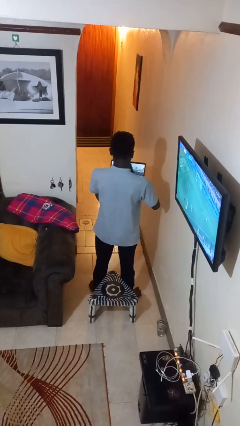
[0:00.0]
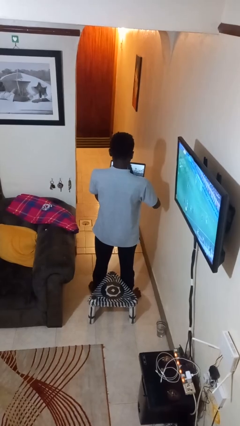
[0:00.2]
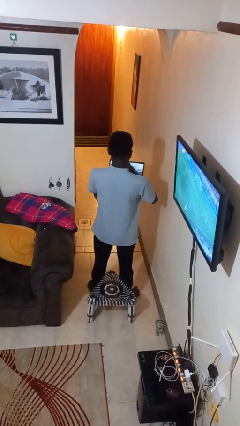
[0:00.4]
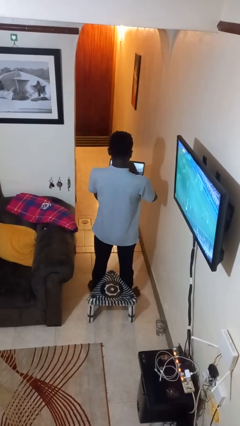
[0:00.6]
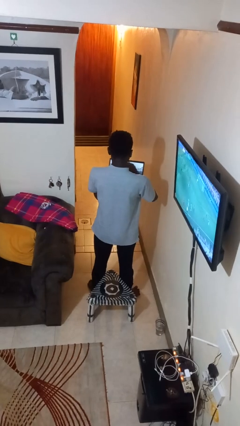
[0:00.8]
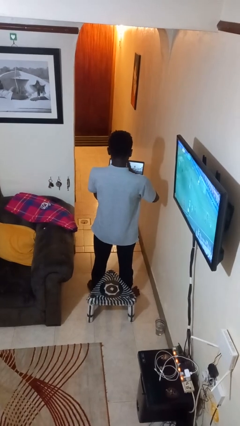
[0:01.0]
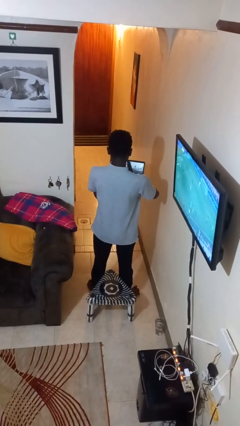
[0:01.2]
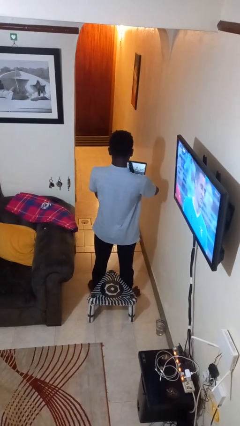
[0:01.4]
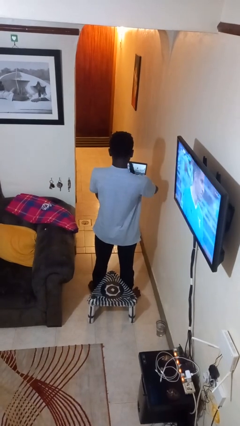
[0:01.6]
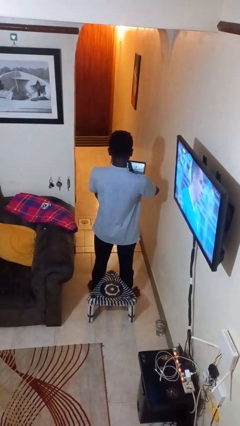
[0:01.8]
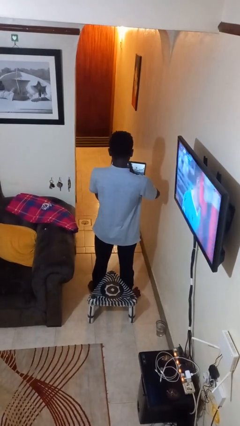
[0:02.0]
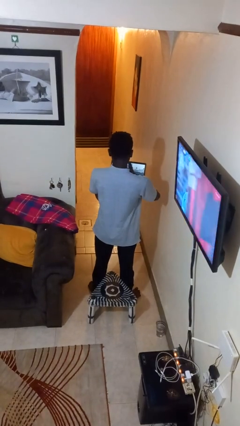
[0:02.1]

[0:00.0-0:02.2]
person interacts with tablet

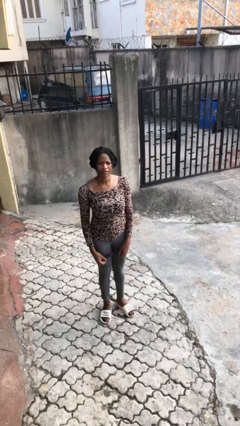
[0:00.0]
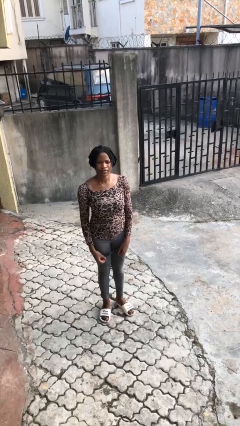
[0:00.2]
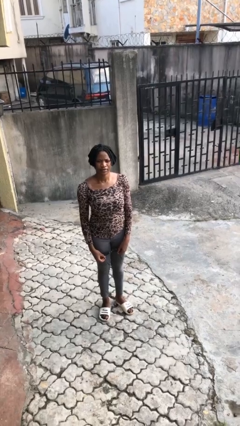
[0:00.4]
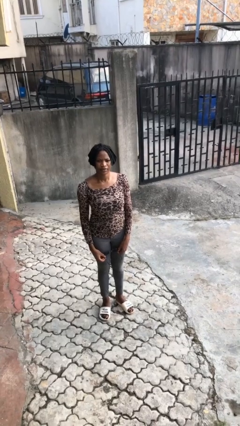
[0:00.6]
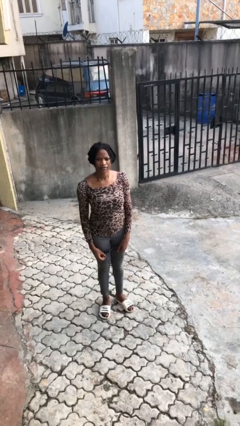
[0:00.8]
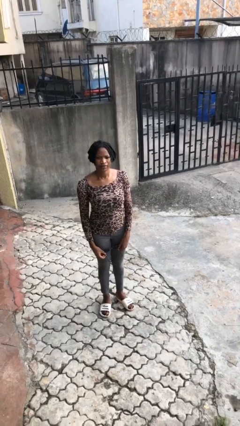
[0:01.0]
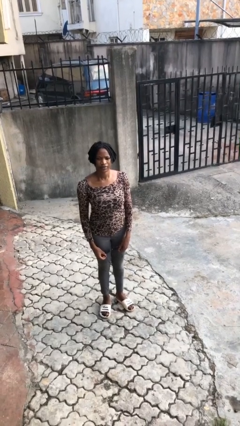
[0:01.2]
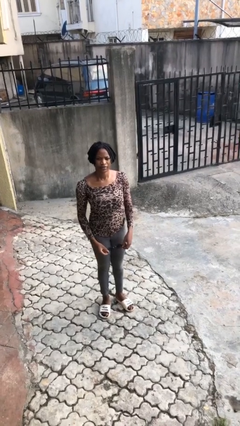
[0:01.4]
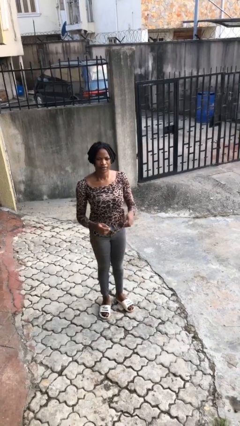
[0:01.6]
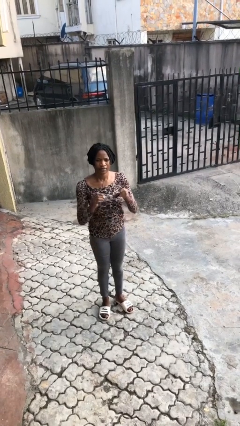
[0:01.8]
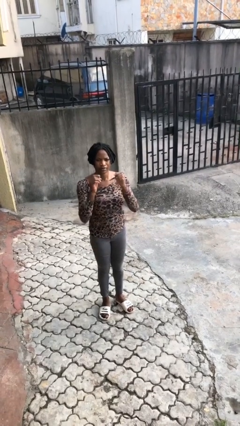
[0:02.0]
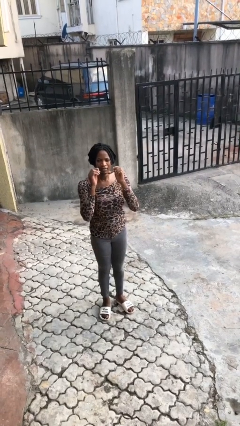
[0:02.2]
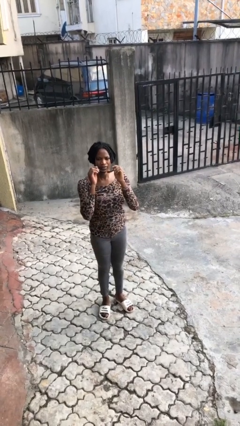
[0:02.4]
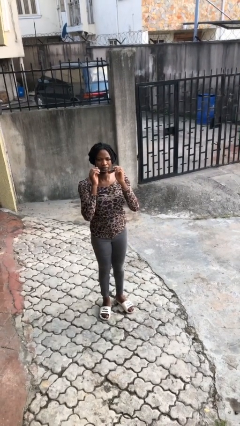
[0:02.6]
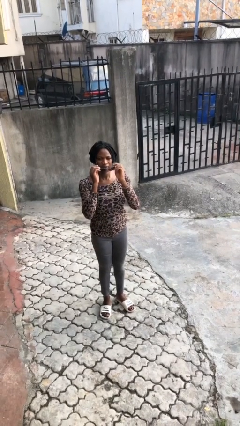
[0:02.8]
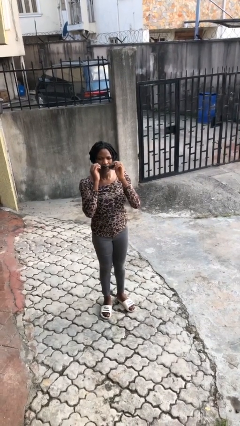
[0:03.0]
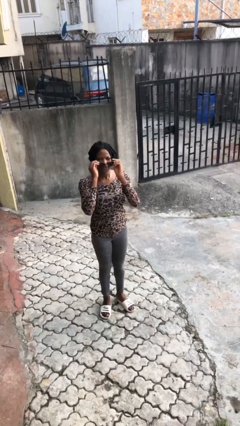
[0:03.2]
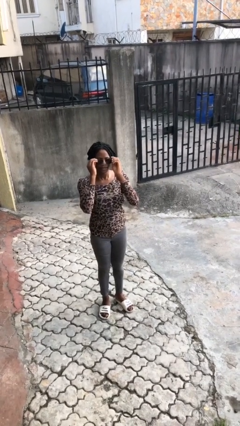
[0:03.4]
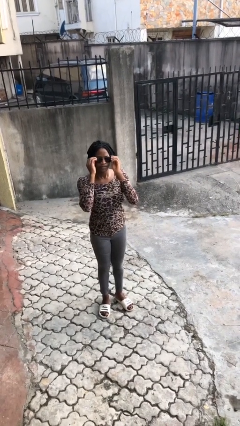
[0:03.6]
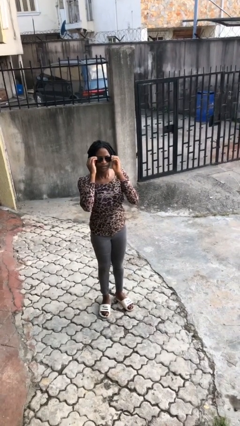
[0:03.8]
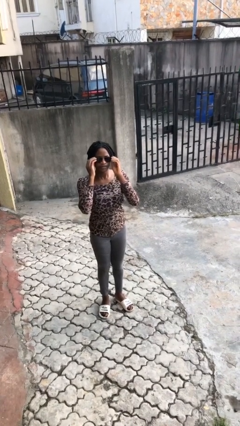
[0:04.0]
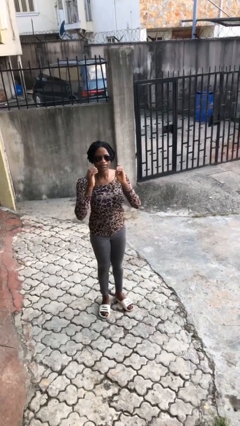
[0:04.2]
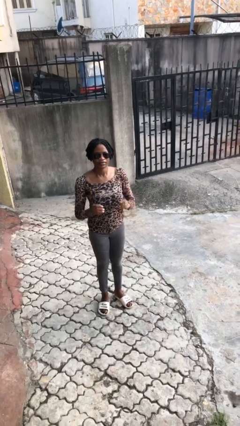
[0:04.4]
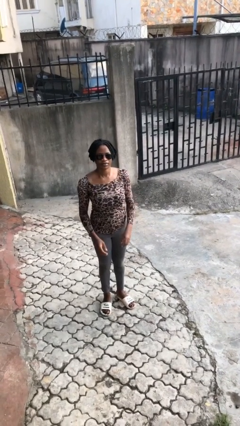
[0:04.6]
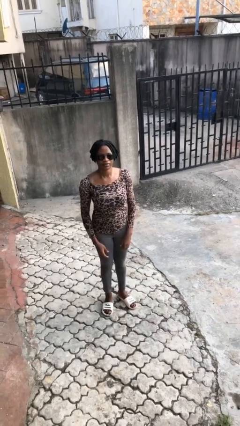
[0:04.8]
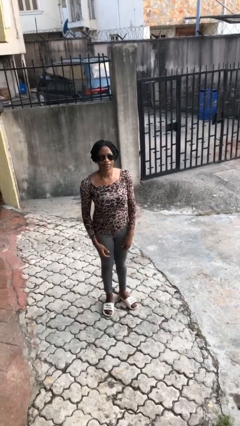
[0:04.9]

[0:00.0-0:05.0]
person puts on sunglasses

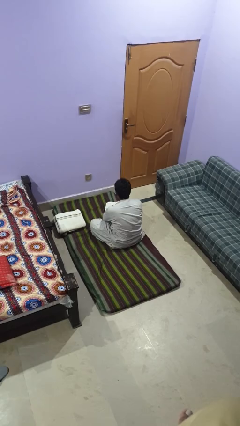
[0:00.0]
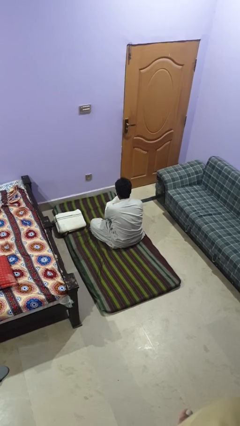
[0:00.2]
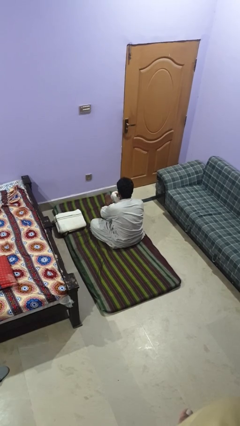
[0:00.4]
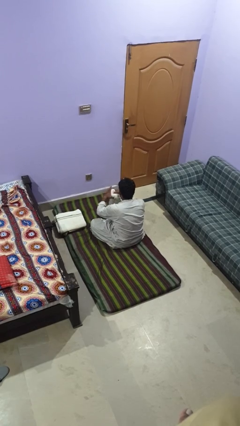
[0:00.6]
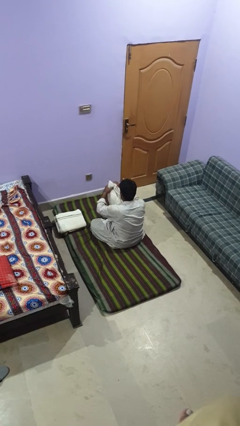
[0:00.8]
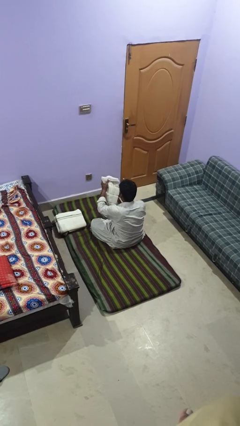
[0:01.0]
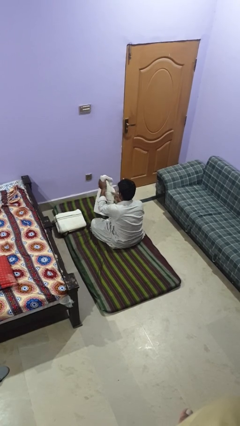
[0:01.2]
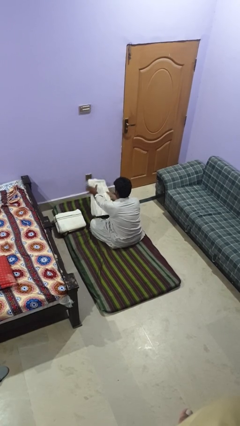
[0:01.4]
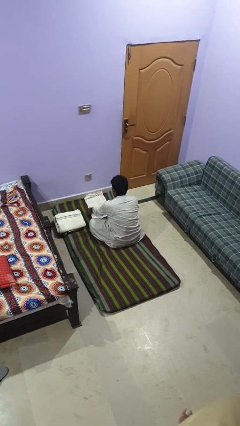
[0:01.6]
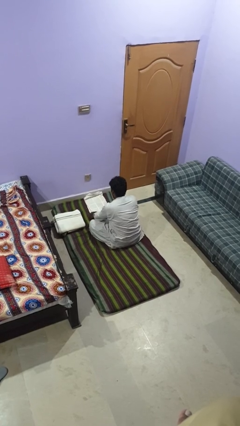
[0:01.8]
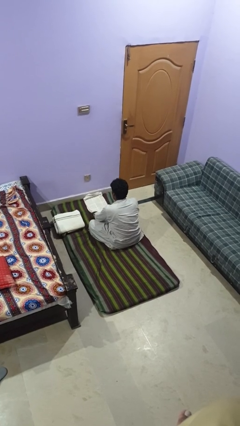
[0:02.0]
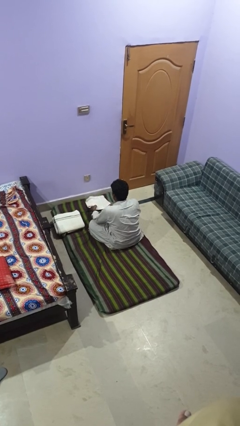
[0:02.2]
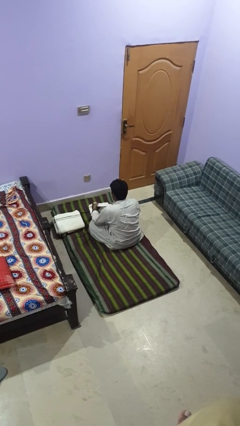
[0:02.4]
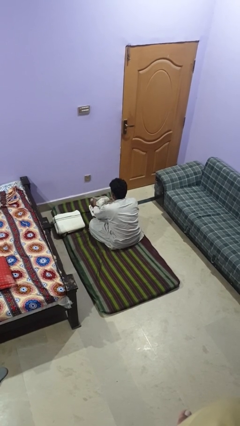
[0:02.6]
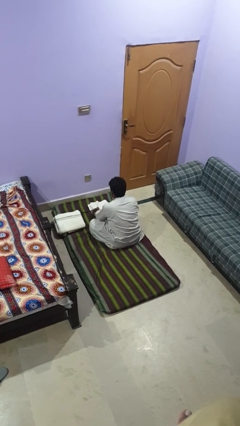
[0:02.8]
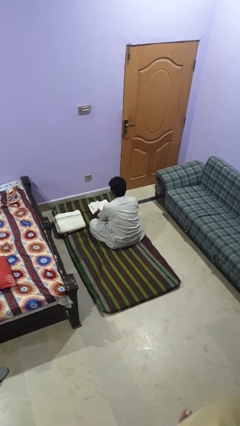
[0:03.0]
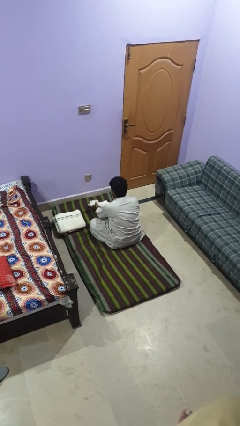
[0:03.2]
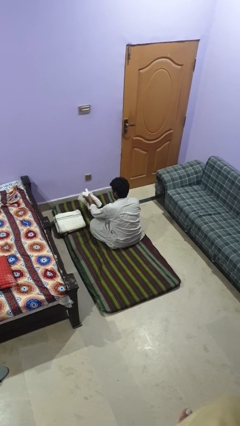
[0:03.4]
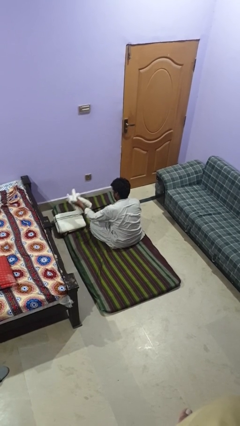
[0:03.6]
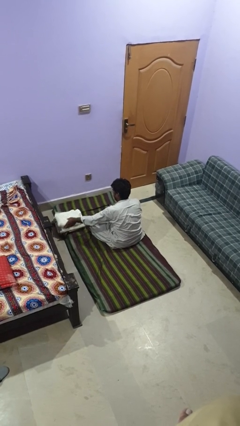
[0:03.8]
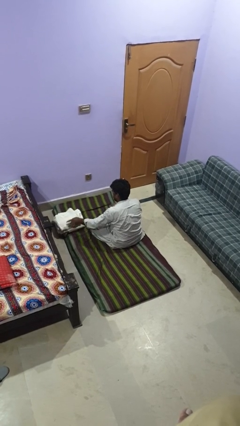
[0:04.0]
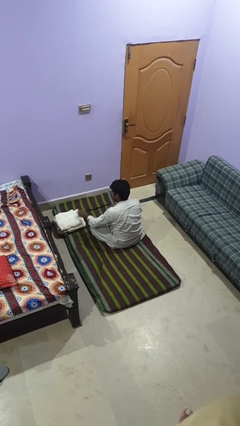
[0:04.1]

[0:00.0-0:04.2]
person folds towel

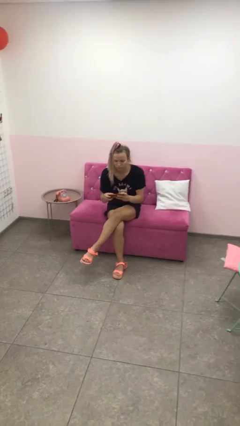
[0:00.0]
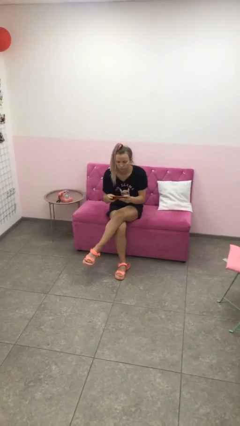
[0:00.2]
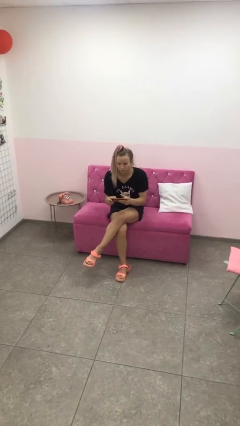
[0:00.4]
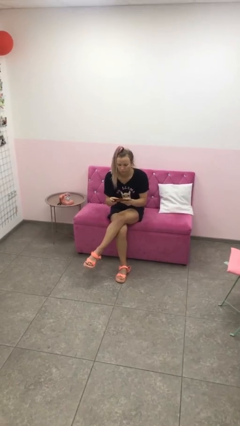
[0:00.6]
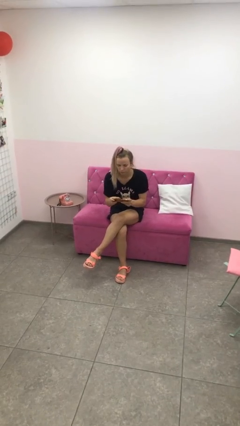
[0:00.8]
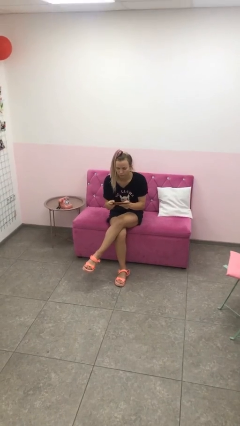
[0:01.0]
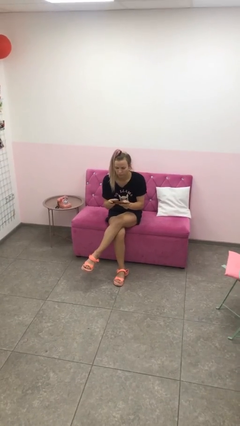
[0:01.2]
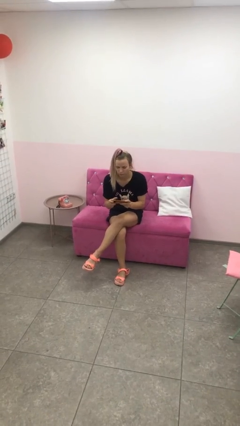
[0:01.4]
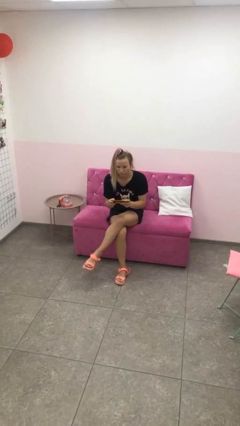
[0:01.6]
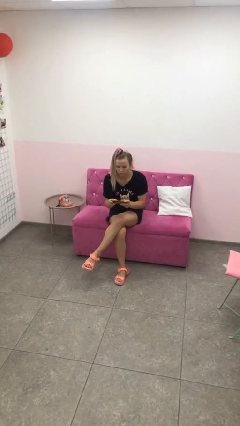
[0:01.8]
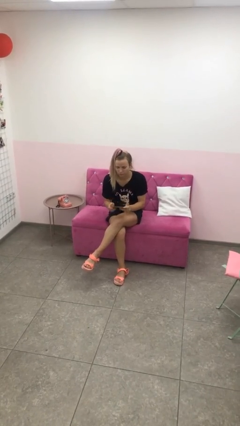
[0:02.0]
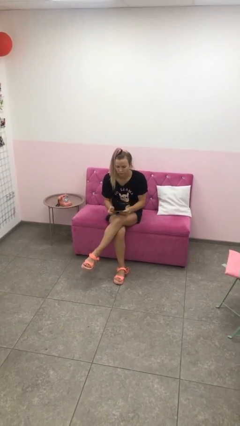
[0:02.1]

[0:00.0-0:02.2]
person interacts with handheld game

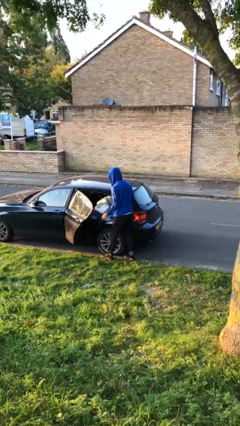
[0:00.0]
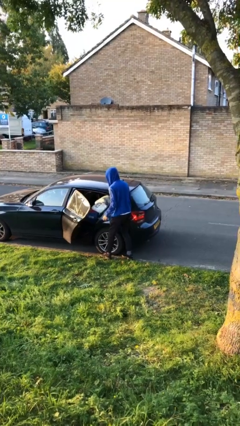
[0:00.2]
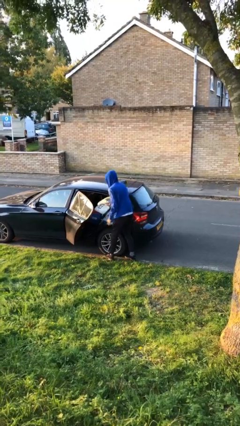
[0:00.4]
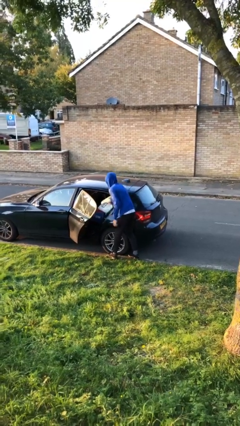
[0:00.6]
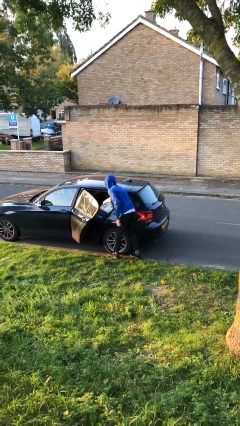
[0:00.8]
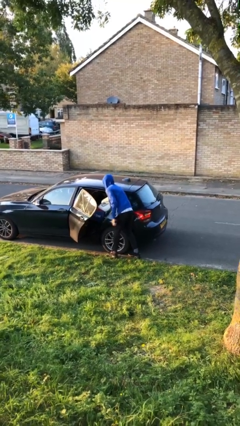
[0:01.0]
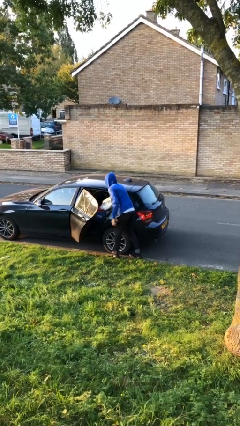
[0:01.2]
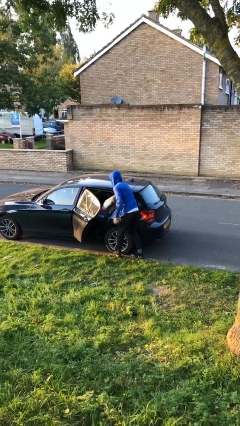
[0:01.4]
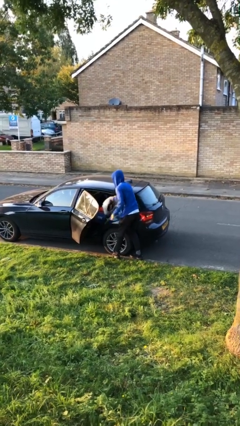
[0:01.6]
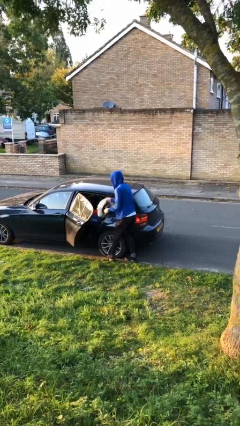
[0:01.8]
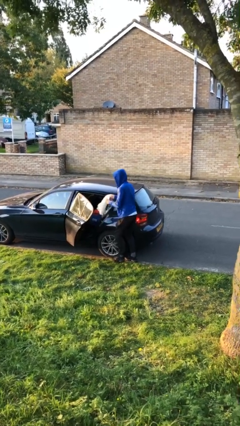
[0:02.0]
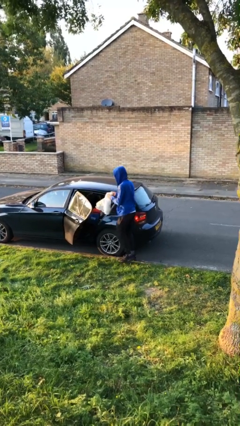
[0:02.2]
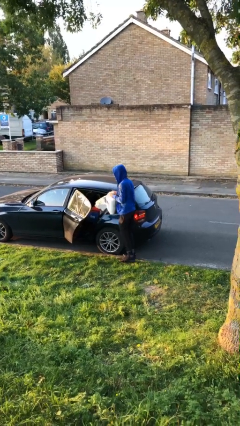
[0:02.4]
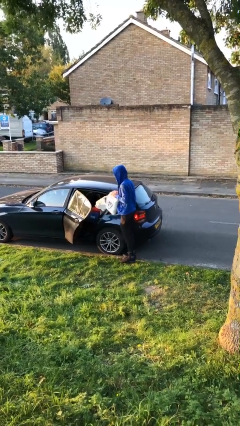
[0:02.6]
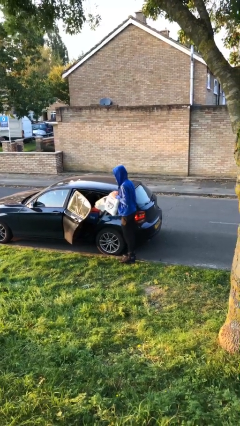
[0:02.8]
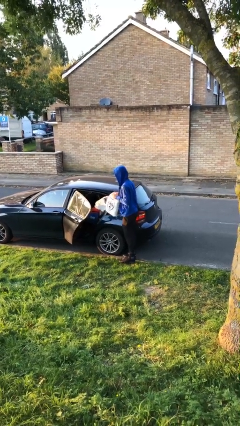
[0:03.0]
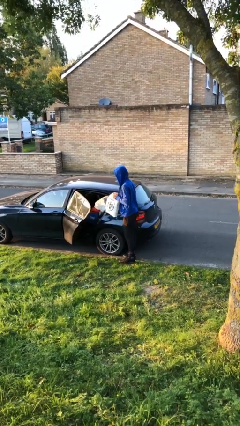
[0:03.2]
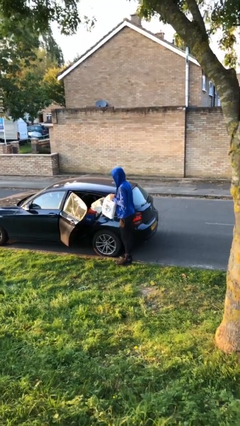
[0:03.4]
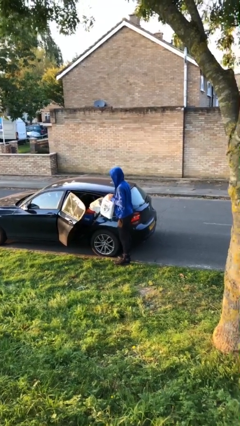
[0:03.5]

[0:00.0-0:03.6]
person unloads car

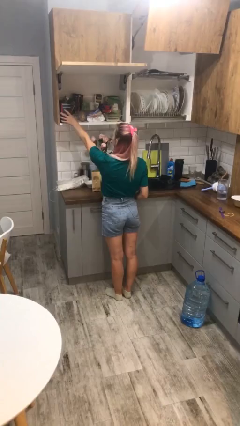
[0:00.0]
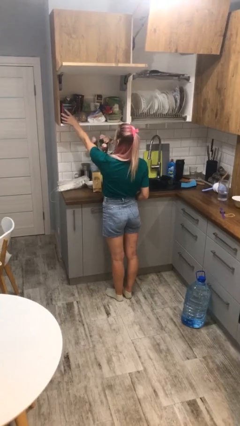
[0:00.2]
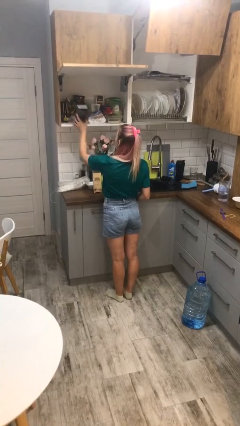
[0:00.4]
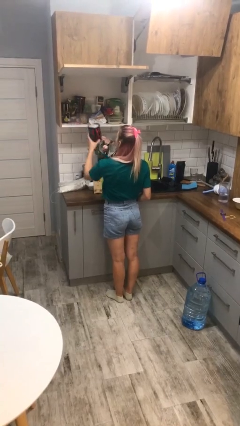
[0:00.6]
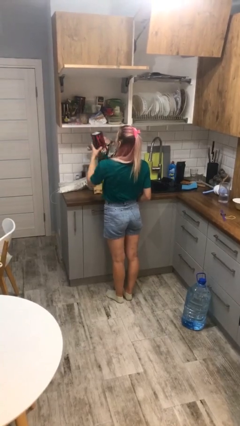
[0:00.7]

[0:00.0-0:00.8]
person picks up object from cabinet
